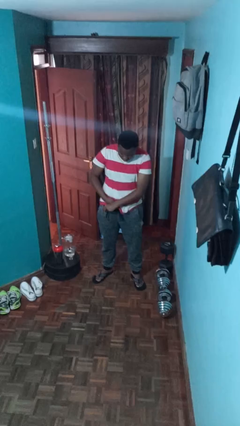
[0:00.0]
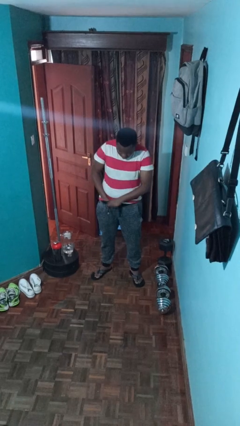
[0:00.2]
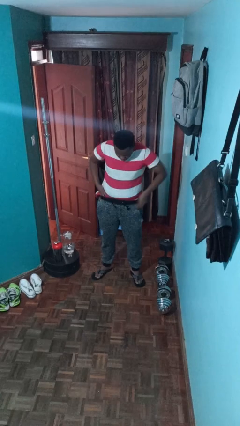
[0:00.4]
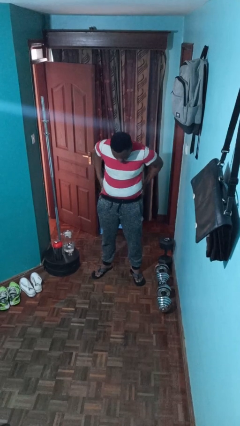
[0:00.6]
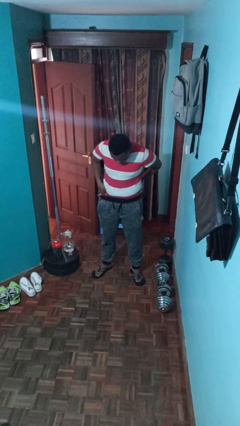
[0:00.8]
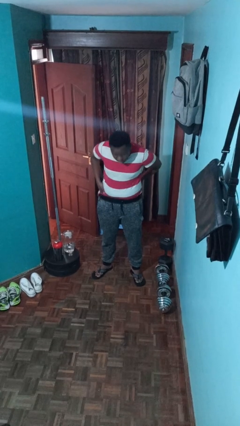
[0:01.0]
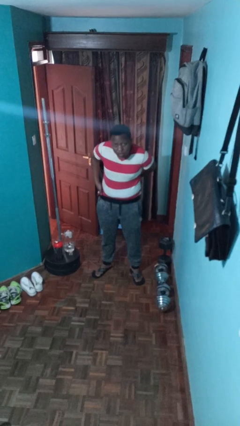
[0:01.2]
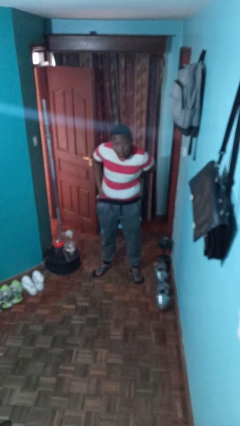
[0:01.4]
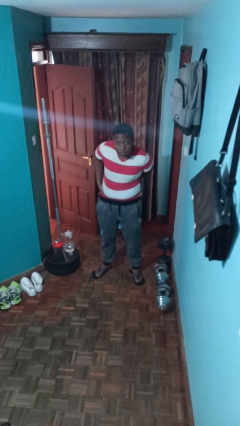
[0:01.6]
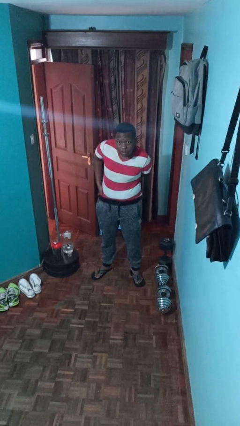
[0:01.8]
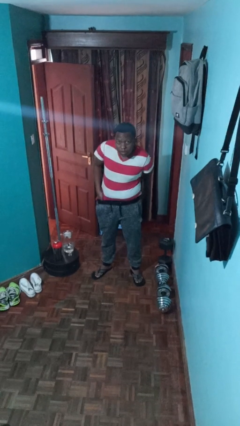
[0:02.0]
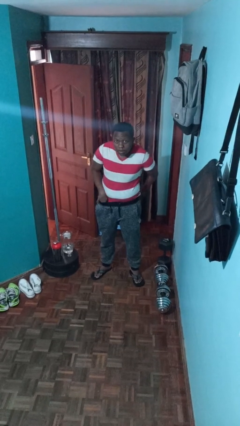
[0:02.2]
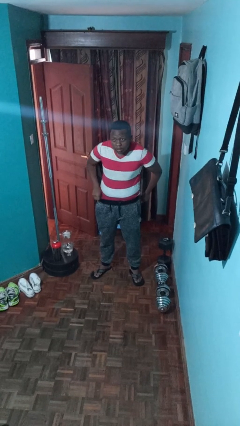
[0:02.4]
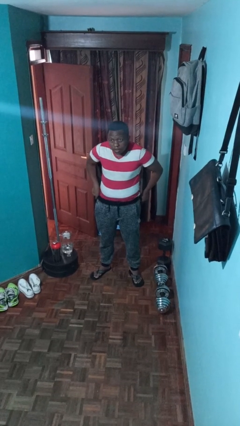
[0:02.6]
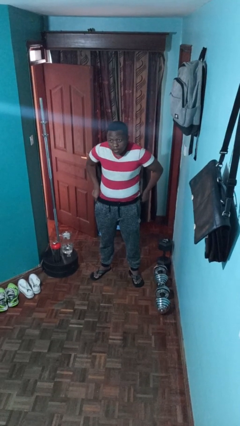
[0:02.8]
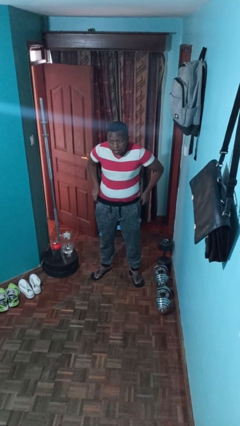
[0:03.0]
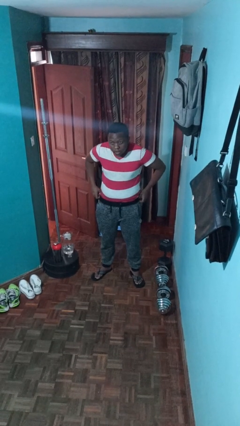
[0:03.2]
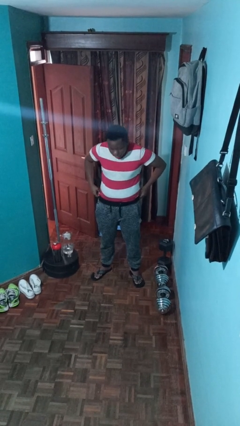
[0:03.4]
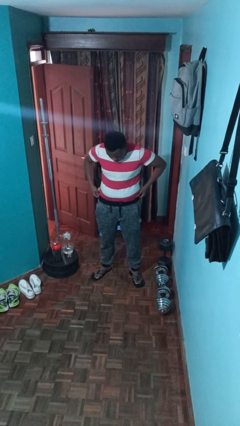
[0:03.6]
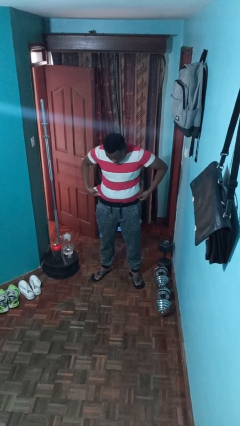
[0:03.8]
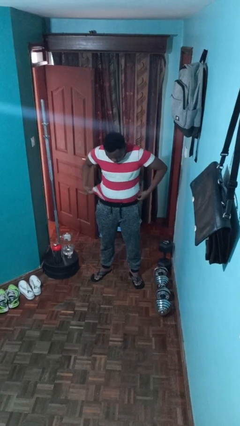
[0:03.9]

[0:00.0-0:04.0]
person tucks in shirt

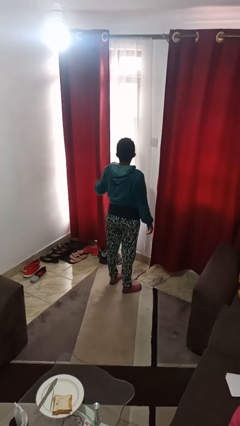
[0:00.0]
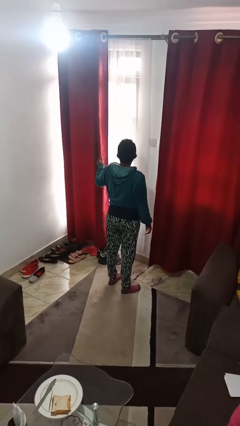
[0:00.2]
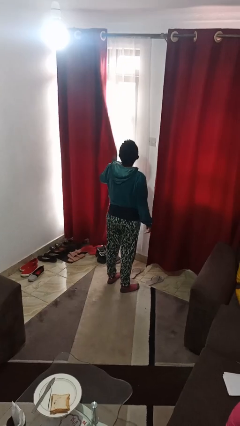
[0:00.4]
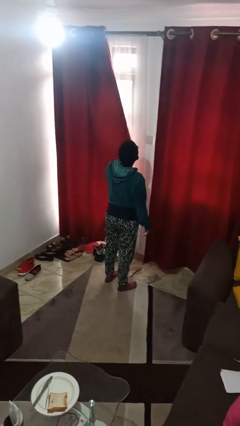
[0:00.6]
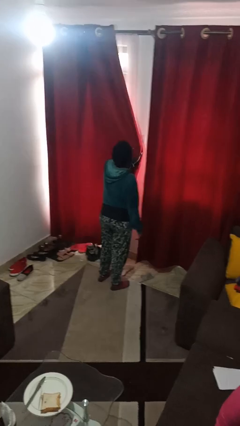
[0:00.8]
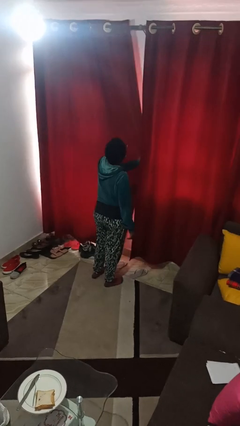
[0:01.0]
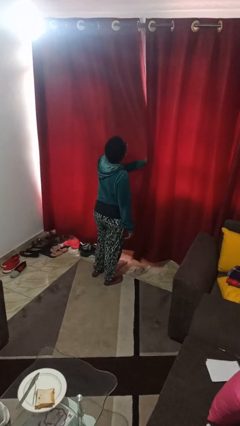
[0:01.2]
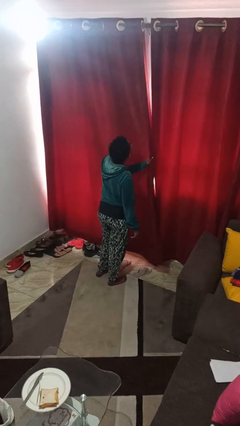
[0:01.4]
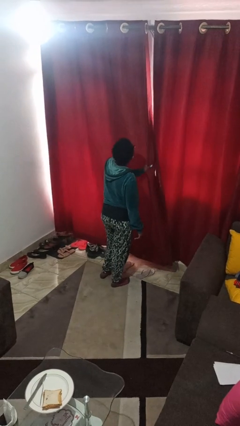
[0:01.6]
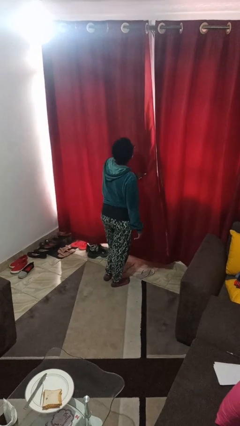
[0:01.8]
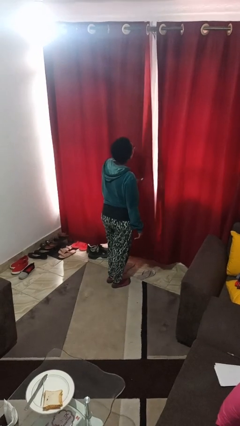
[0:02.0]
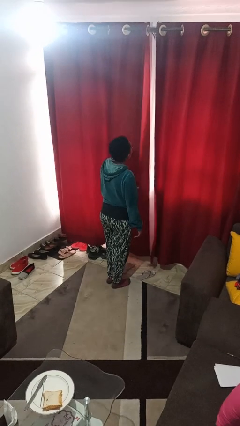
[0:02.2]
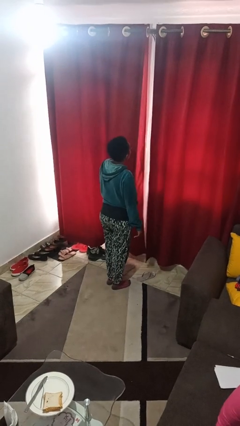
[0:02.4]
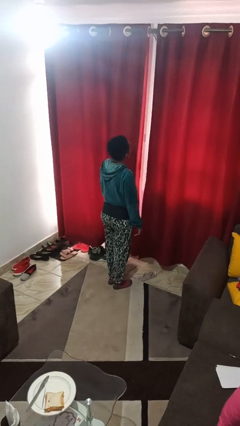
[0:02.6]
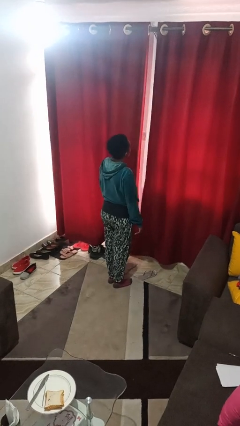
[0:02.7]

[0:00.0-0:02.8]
person closes curtains

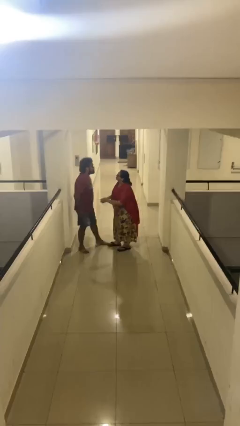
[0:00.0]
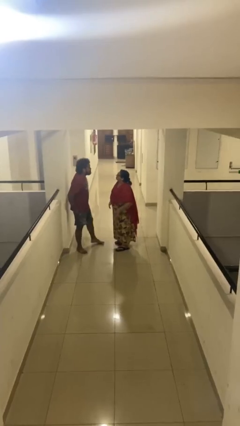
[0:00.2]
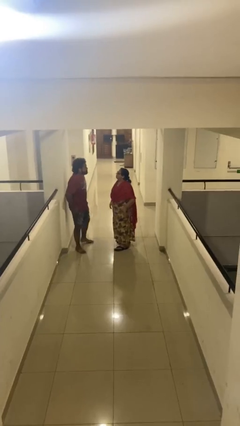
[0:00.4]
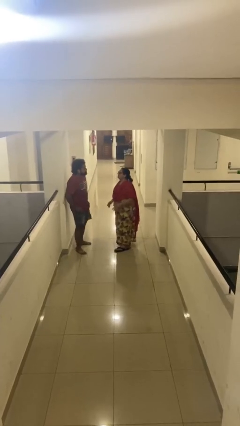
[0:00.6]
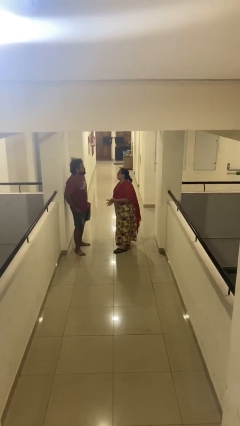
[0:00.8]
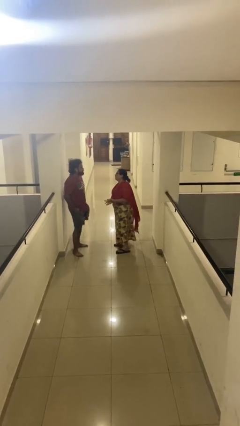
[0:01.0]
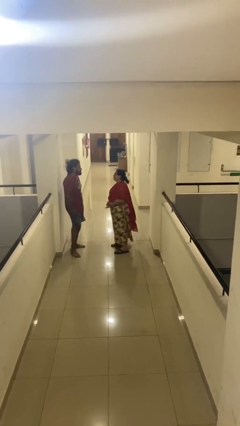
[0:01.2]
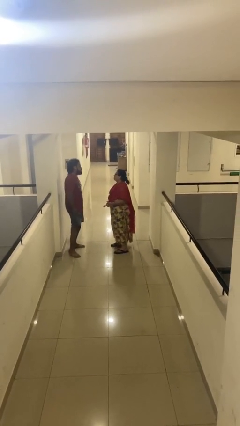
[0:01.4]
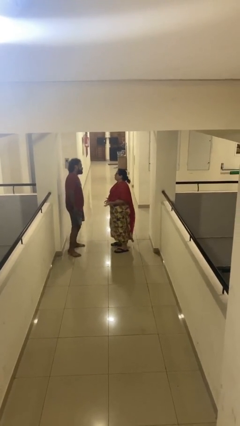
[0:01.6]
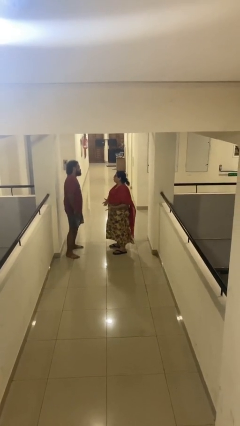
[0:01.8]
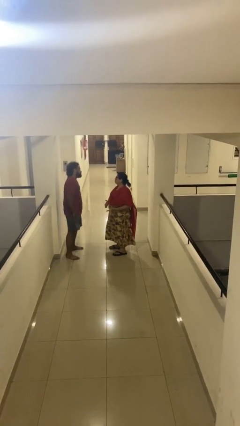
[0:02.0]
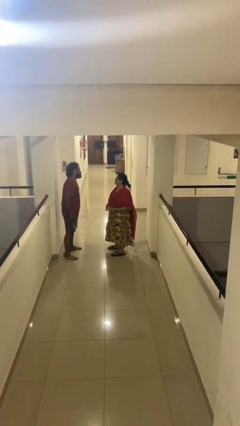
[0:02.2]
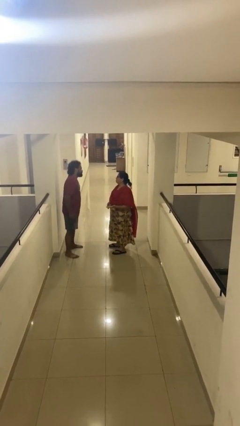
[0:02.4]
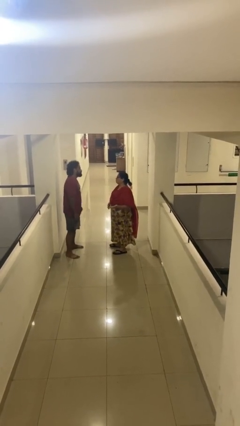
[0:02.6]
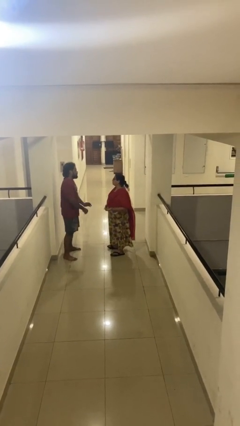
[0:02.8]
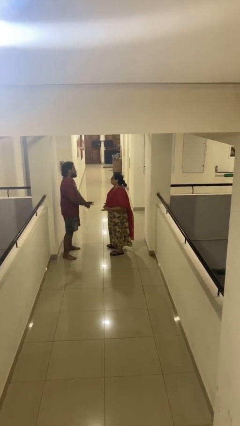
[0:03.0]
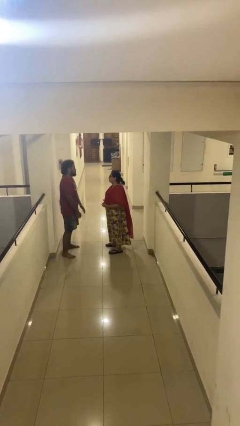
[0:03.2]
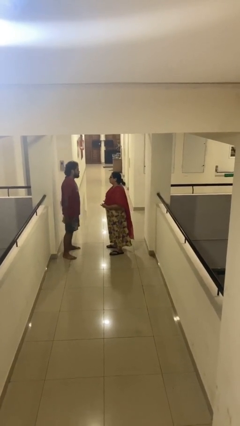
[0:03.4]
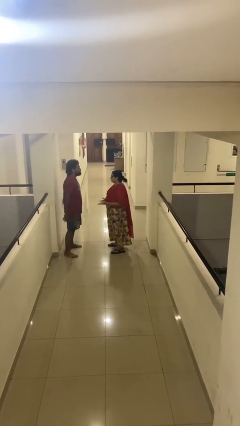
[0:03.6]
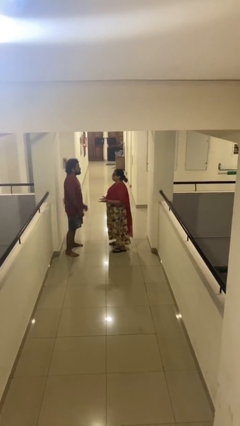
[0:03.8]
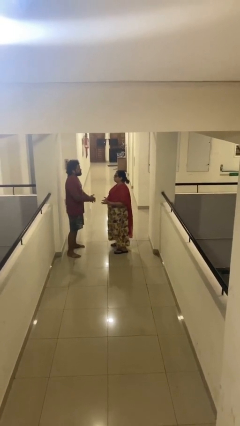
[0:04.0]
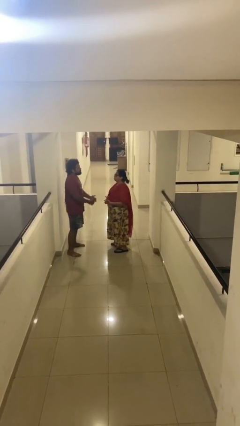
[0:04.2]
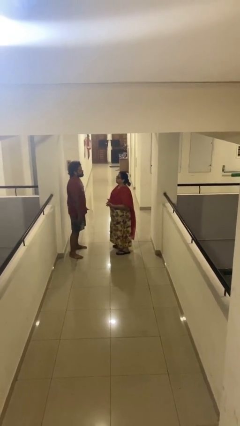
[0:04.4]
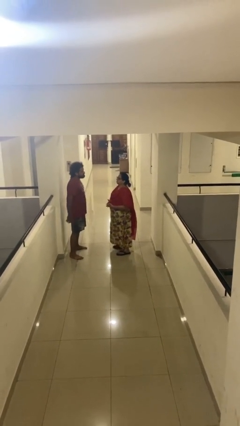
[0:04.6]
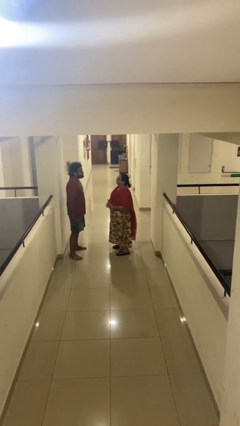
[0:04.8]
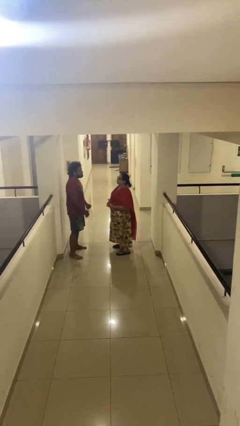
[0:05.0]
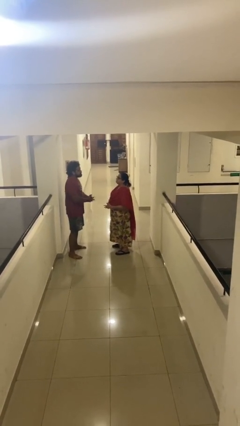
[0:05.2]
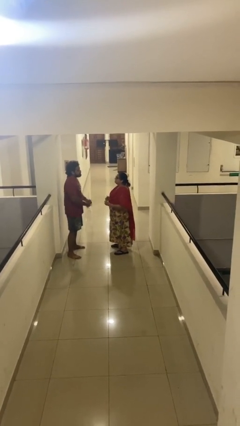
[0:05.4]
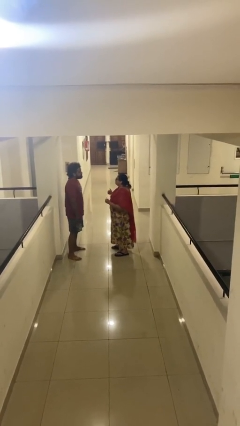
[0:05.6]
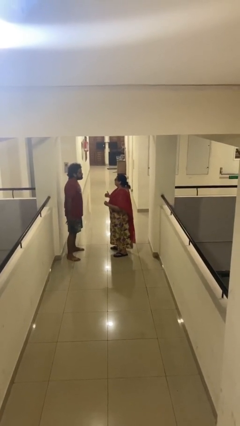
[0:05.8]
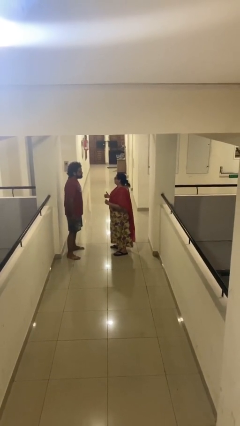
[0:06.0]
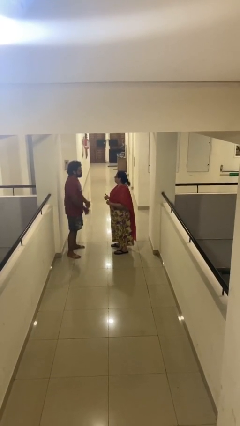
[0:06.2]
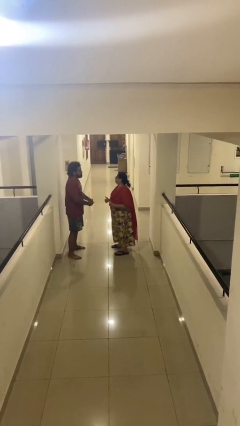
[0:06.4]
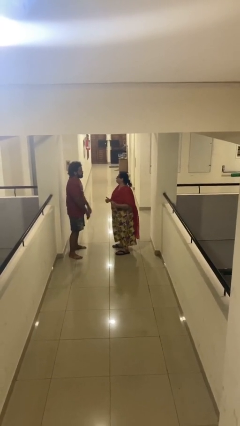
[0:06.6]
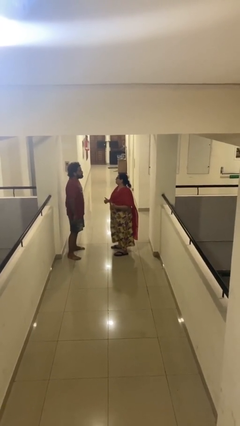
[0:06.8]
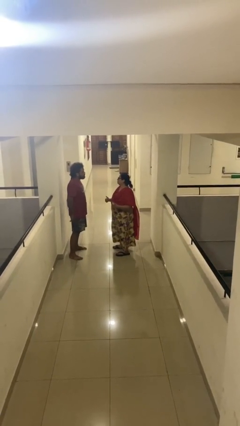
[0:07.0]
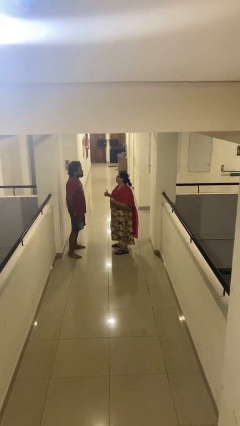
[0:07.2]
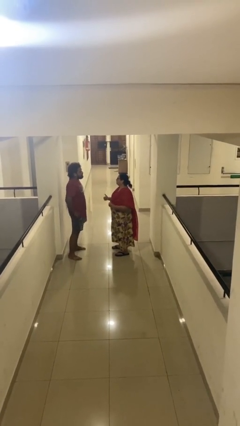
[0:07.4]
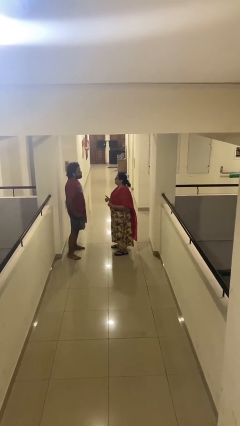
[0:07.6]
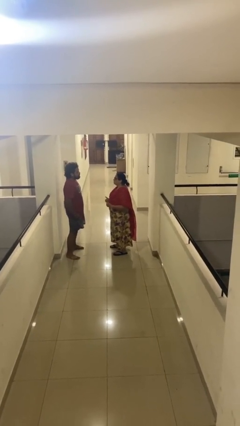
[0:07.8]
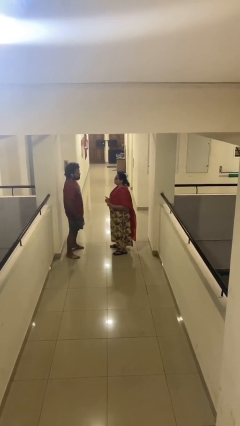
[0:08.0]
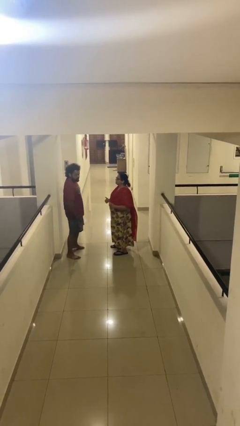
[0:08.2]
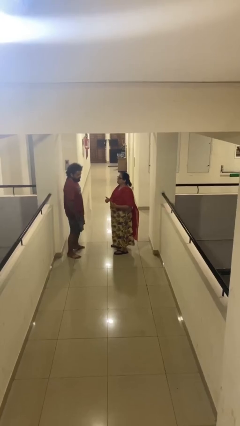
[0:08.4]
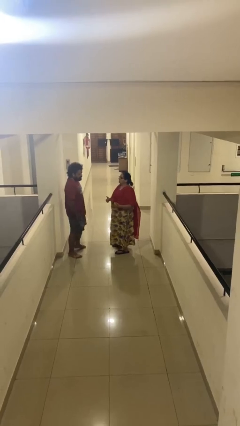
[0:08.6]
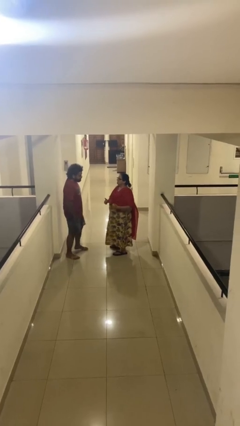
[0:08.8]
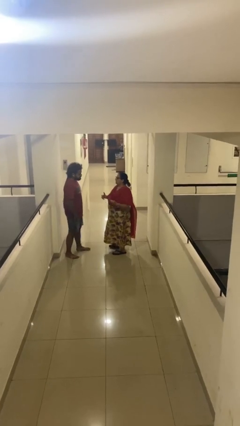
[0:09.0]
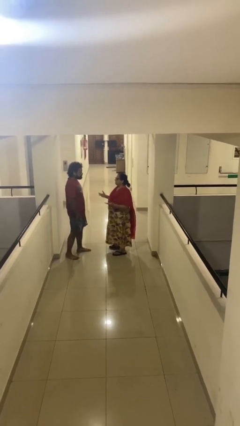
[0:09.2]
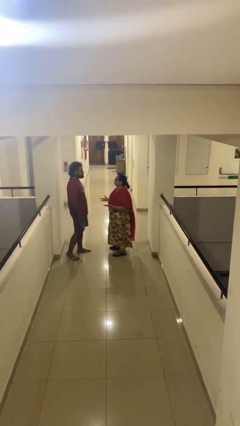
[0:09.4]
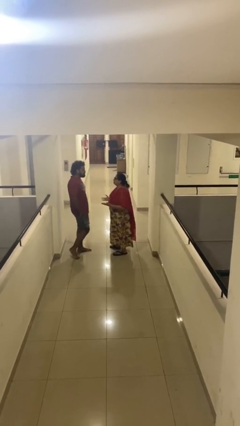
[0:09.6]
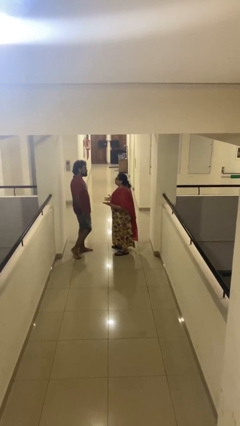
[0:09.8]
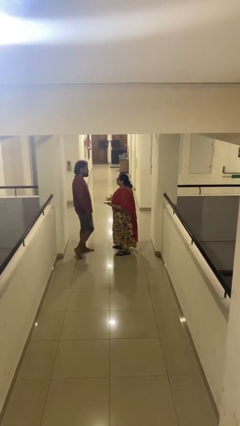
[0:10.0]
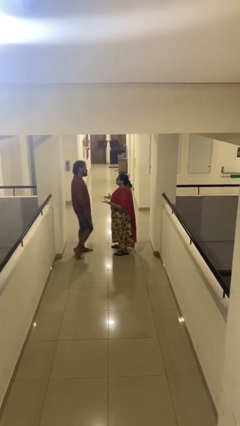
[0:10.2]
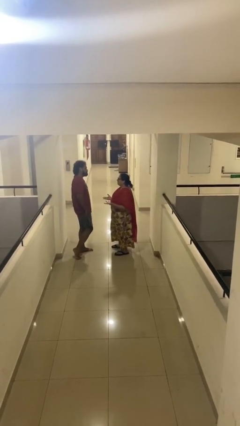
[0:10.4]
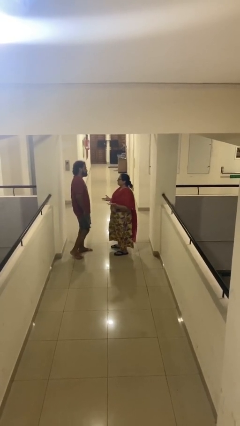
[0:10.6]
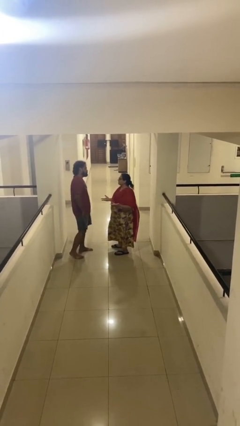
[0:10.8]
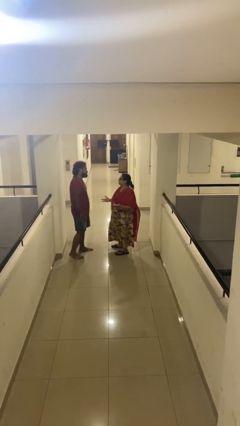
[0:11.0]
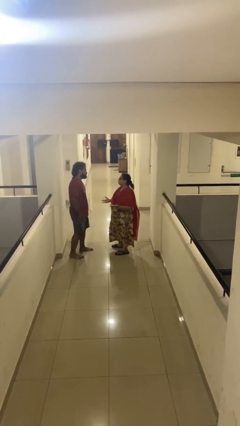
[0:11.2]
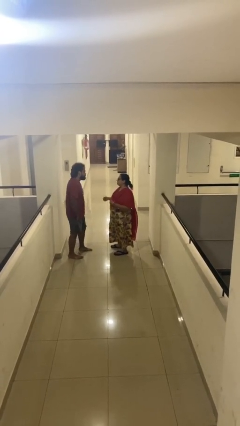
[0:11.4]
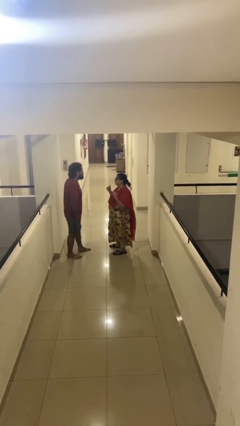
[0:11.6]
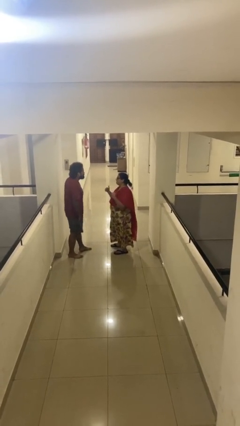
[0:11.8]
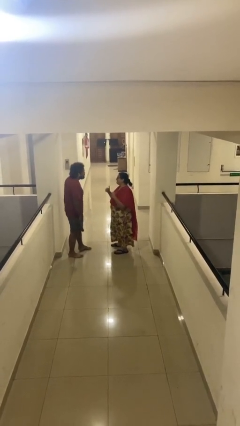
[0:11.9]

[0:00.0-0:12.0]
person talks to person
